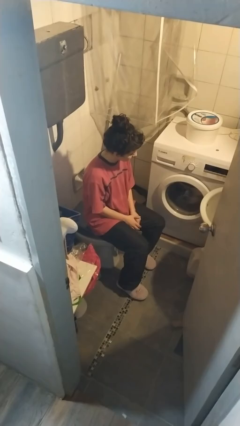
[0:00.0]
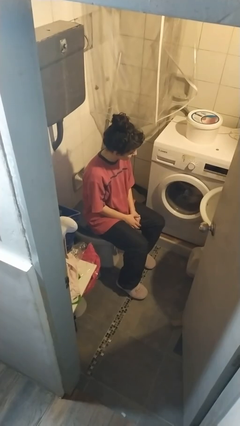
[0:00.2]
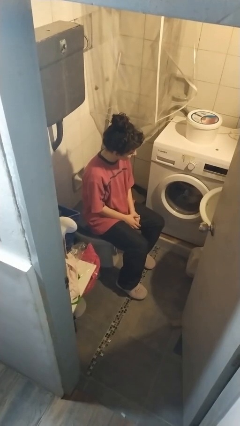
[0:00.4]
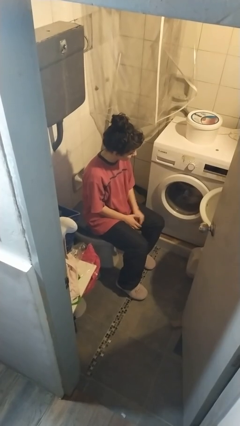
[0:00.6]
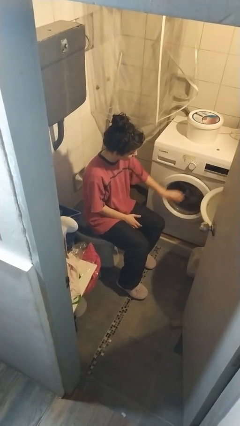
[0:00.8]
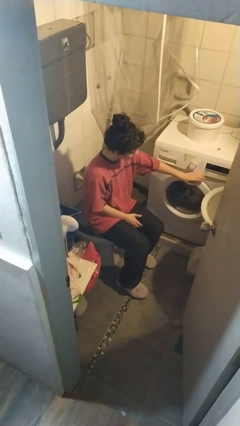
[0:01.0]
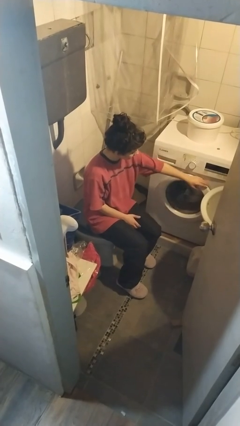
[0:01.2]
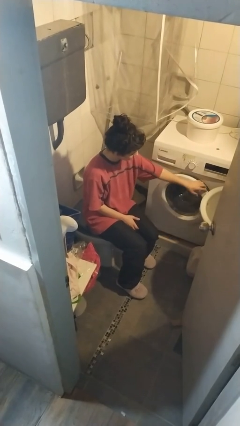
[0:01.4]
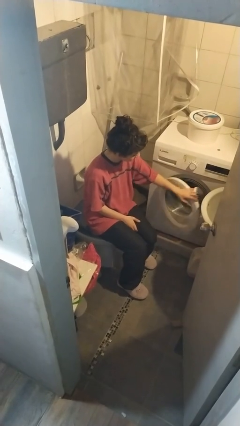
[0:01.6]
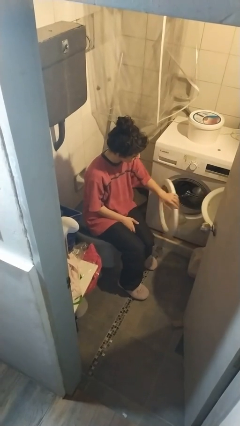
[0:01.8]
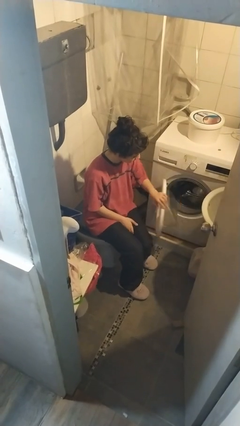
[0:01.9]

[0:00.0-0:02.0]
person opens clothes washer

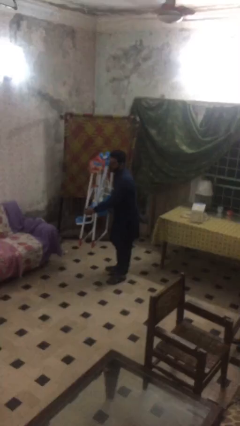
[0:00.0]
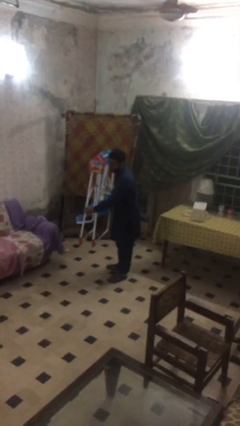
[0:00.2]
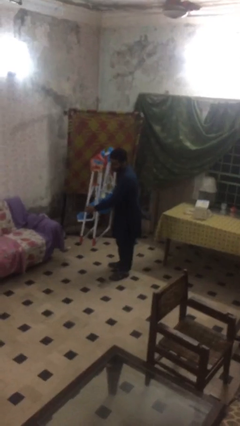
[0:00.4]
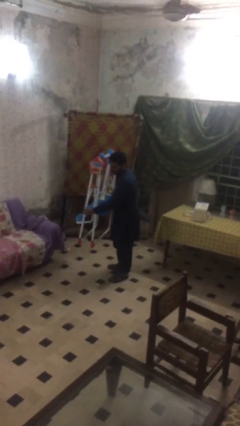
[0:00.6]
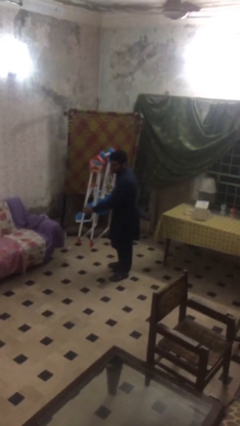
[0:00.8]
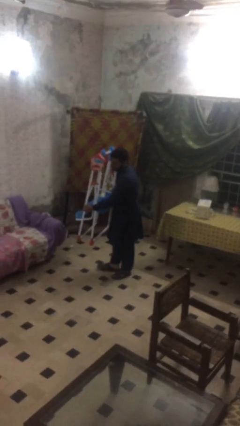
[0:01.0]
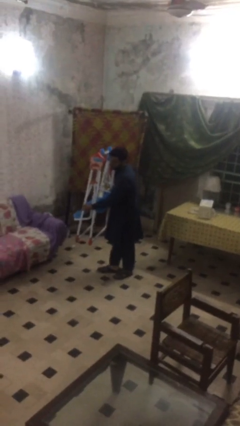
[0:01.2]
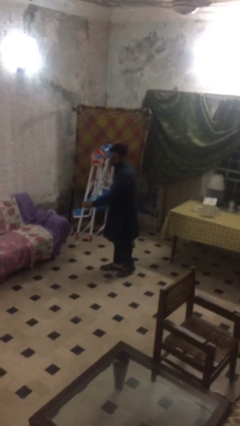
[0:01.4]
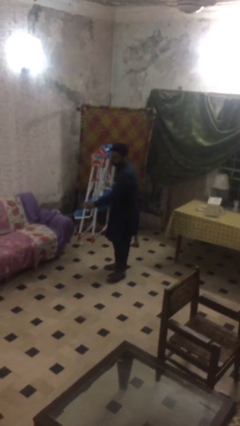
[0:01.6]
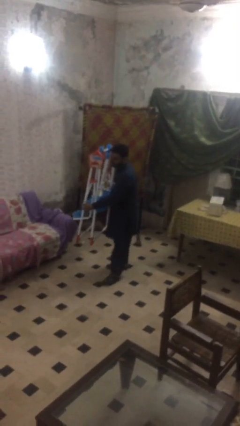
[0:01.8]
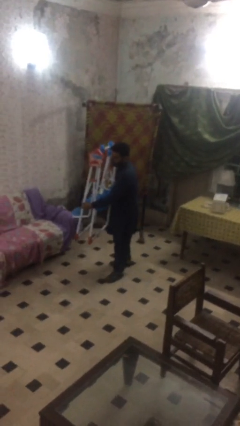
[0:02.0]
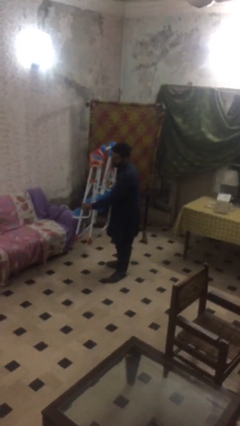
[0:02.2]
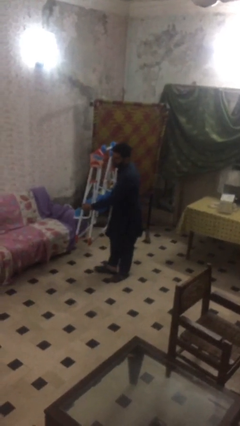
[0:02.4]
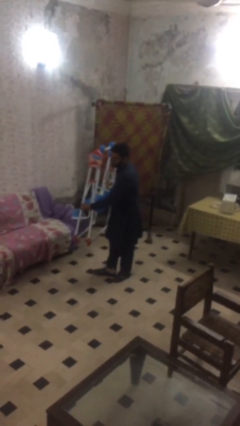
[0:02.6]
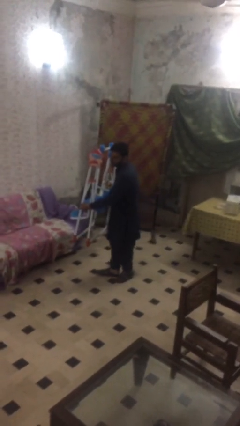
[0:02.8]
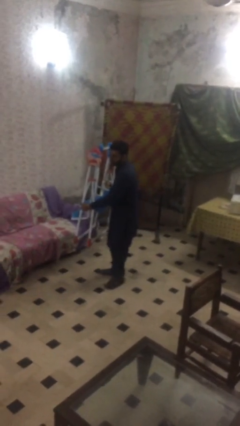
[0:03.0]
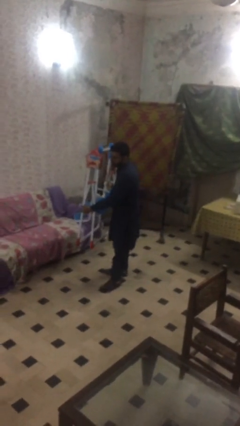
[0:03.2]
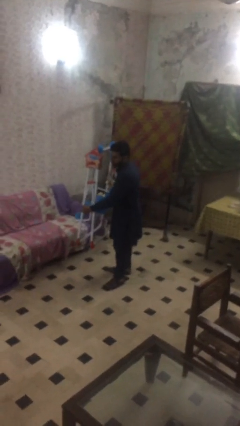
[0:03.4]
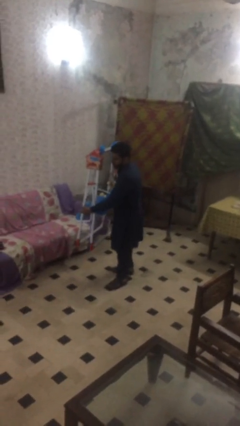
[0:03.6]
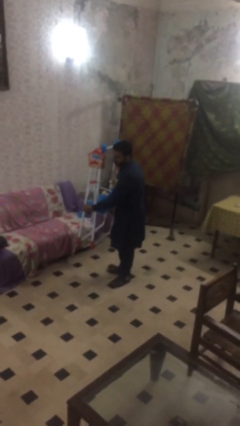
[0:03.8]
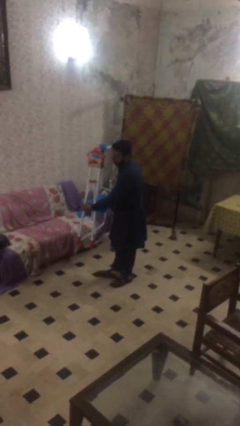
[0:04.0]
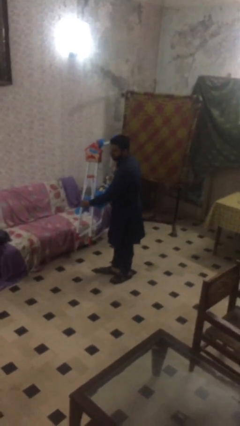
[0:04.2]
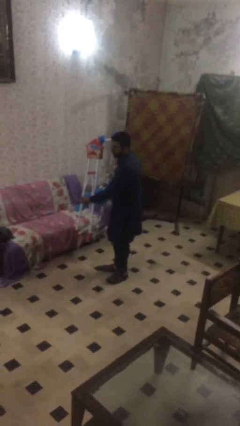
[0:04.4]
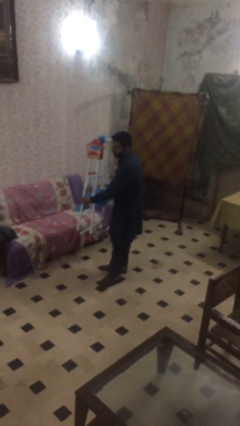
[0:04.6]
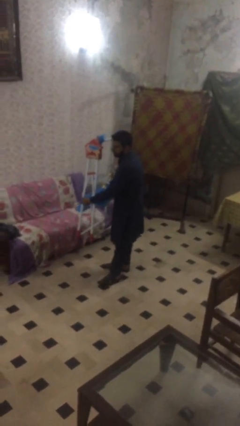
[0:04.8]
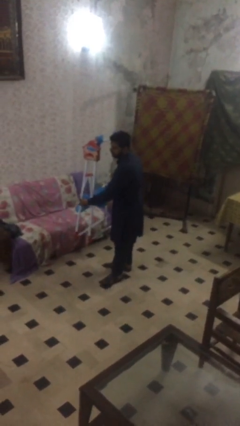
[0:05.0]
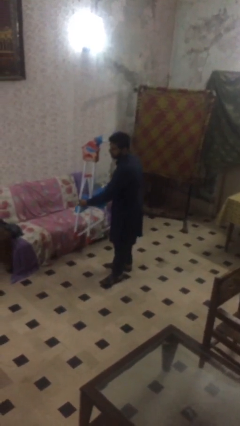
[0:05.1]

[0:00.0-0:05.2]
person carries heavy object

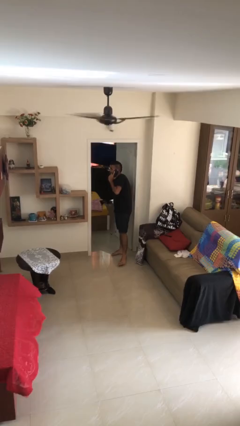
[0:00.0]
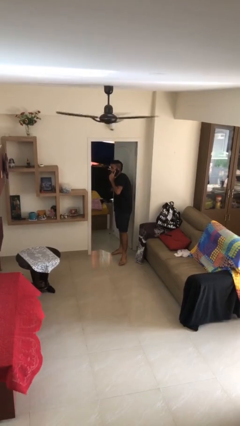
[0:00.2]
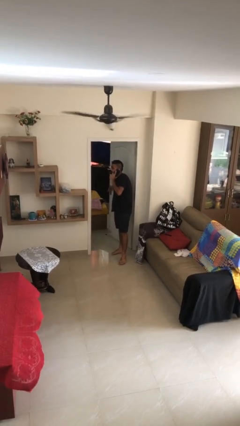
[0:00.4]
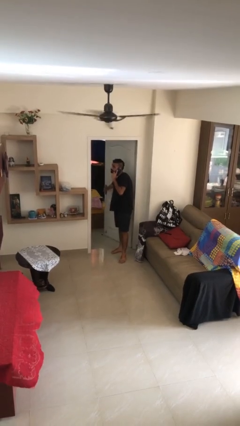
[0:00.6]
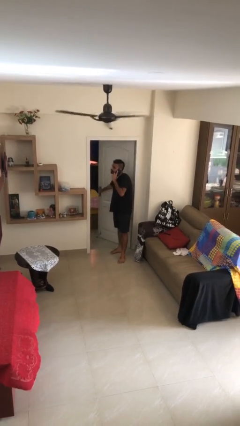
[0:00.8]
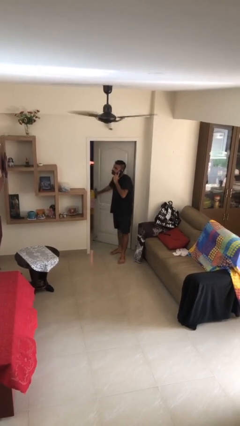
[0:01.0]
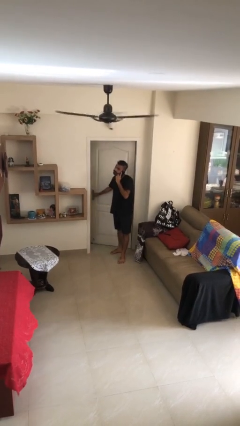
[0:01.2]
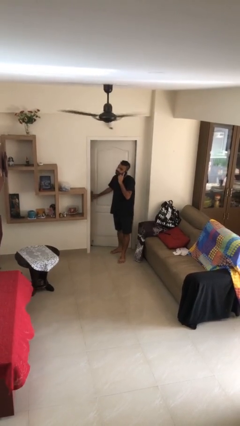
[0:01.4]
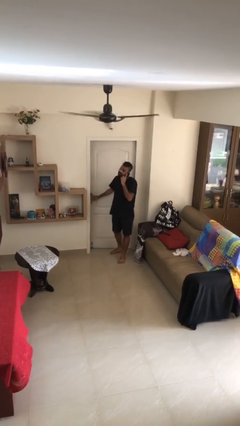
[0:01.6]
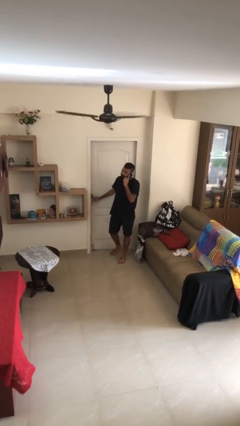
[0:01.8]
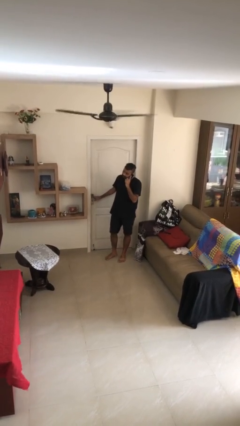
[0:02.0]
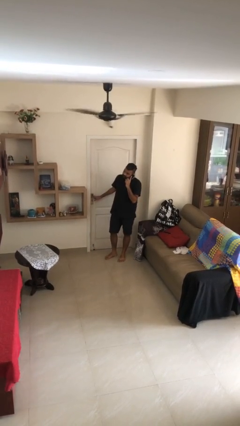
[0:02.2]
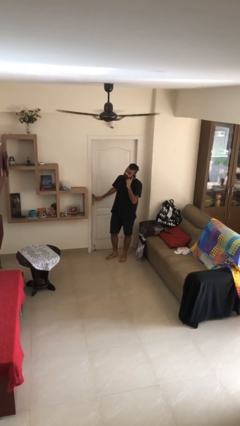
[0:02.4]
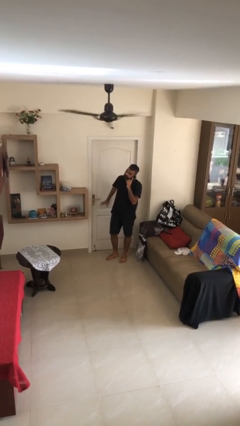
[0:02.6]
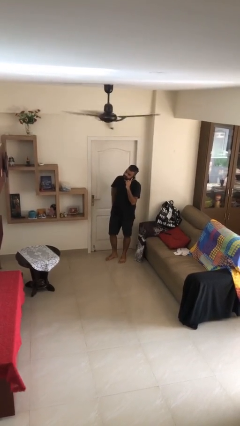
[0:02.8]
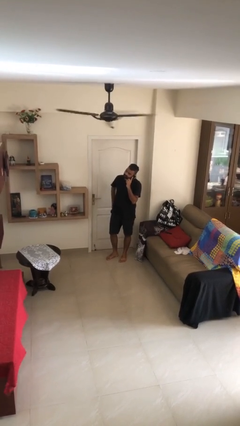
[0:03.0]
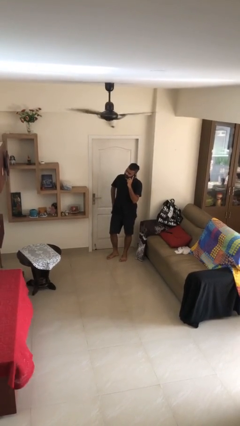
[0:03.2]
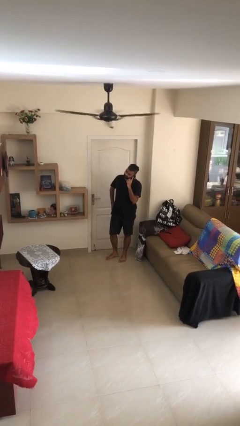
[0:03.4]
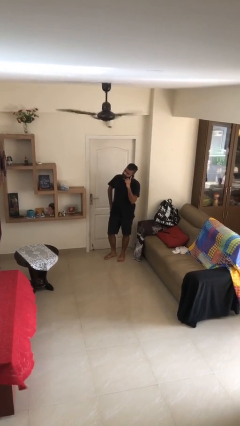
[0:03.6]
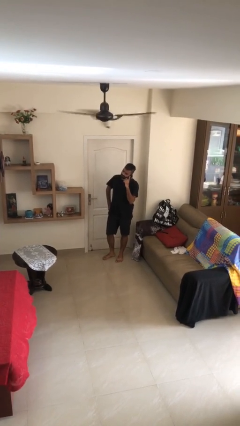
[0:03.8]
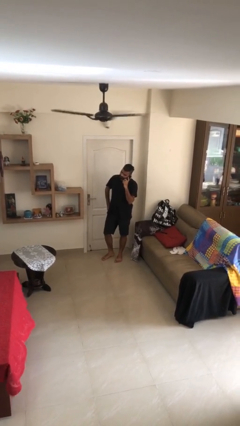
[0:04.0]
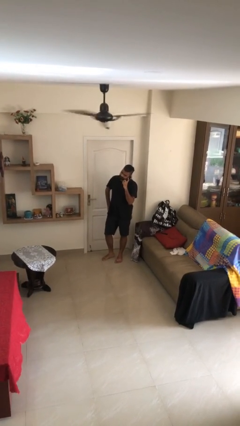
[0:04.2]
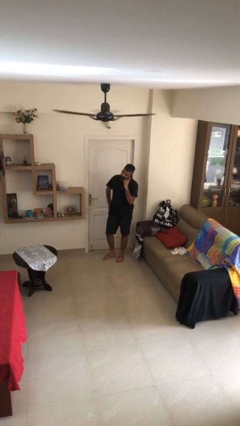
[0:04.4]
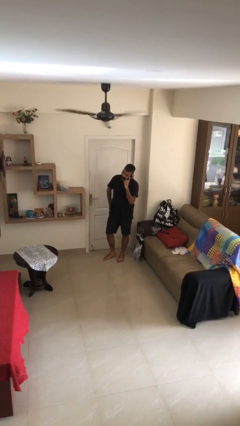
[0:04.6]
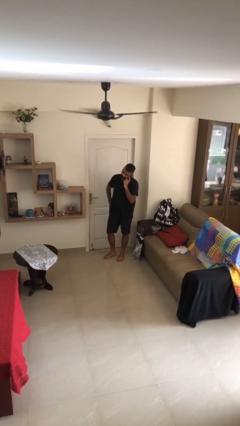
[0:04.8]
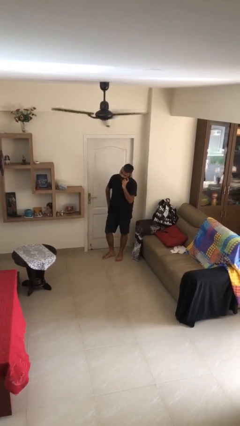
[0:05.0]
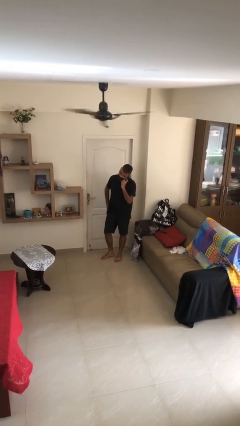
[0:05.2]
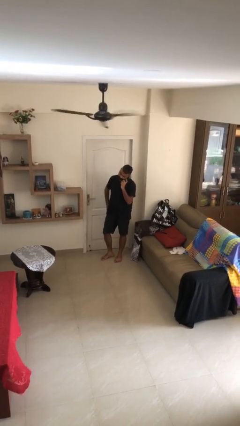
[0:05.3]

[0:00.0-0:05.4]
person closes facility door

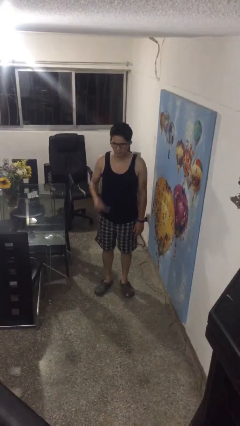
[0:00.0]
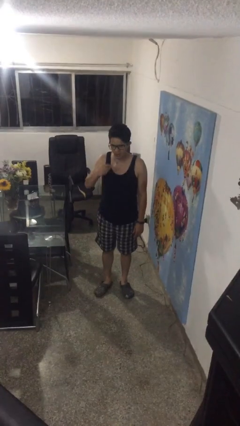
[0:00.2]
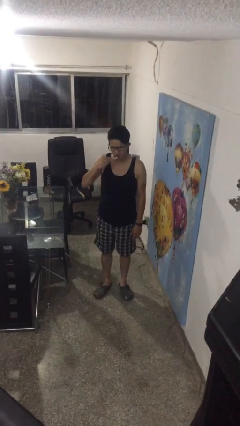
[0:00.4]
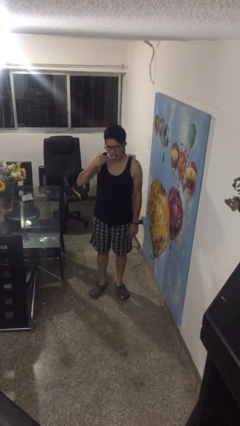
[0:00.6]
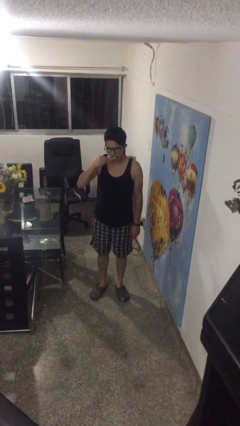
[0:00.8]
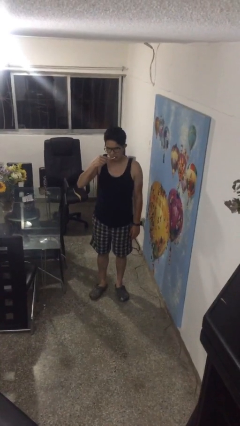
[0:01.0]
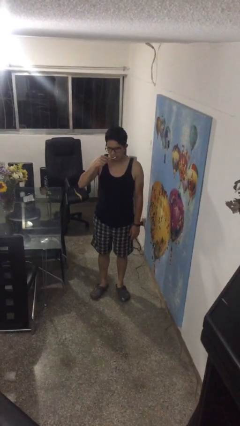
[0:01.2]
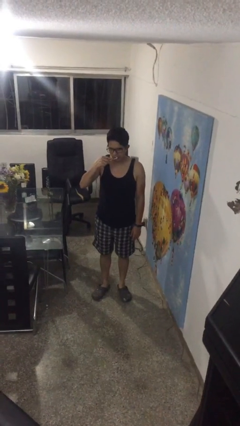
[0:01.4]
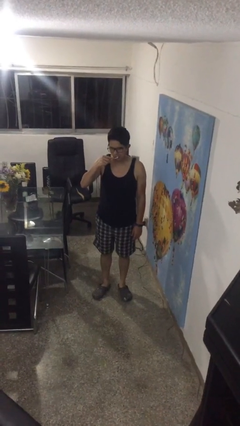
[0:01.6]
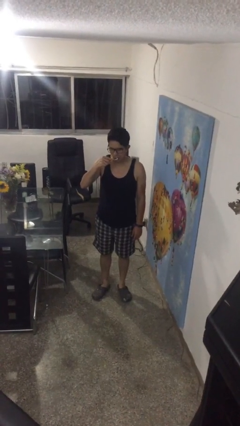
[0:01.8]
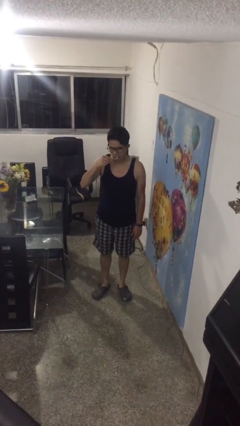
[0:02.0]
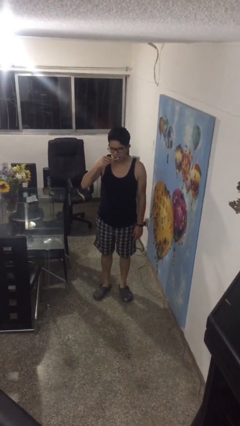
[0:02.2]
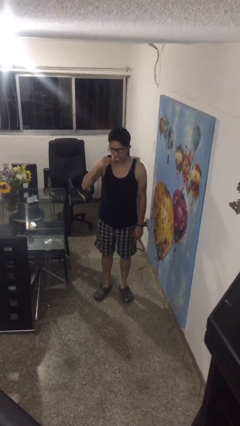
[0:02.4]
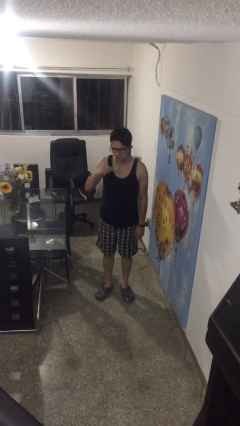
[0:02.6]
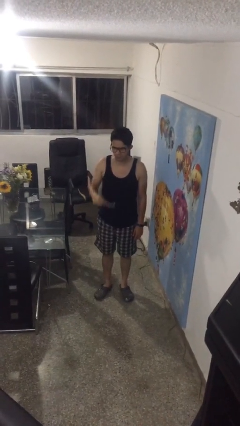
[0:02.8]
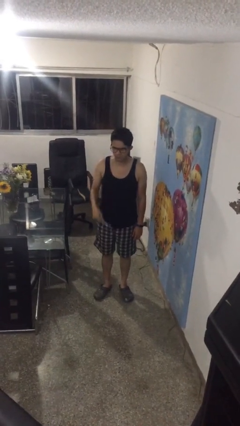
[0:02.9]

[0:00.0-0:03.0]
person brushes teeth

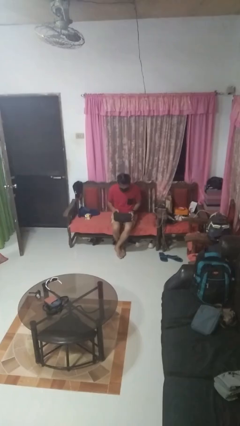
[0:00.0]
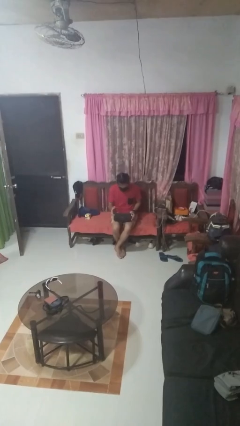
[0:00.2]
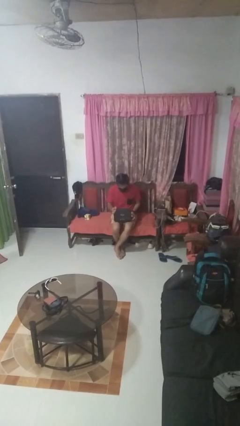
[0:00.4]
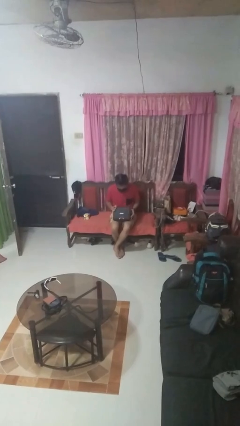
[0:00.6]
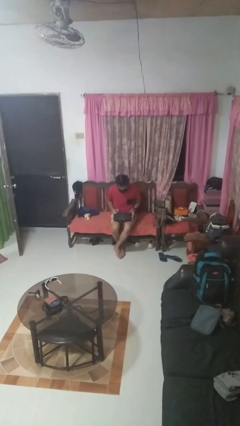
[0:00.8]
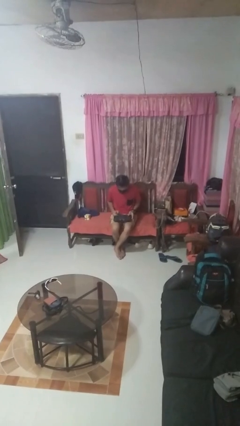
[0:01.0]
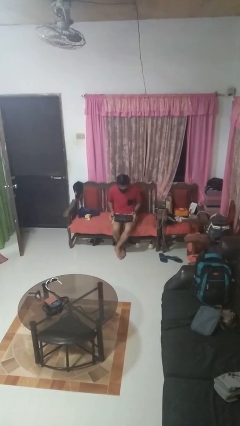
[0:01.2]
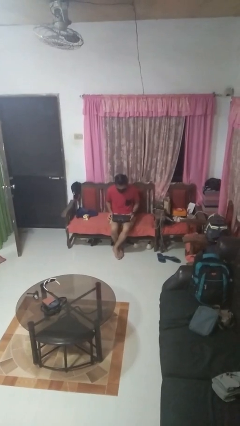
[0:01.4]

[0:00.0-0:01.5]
person closes laptop

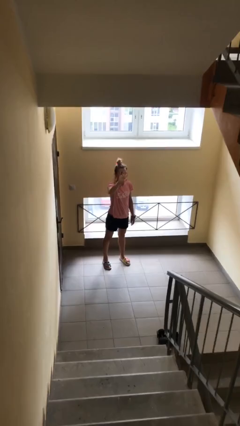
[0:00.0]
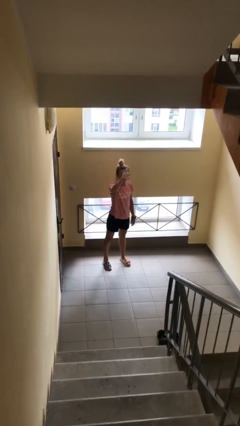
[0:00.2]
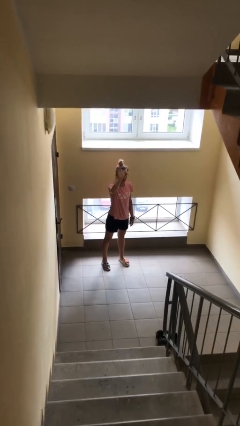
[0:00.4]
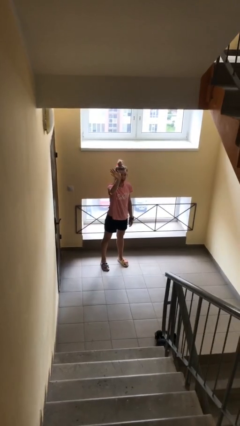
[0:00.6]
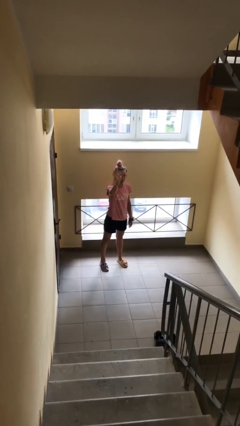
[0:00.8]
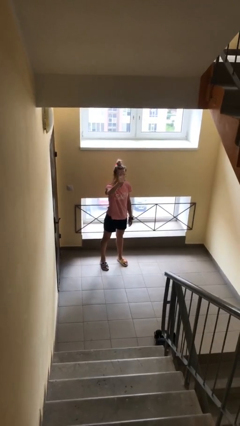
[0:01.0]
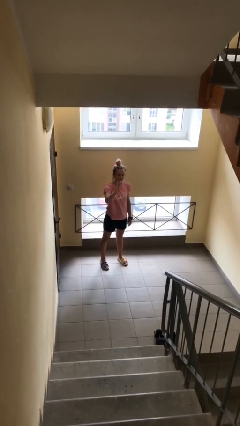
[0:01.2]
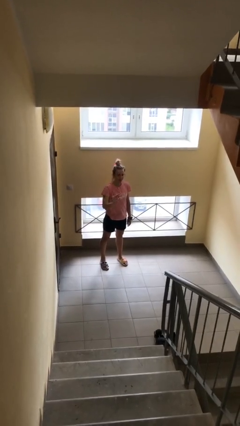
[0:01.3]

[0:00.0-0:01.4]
person waves at person
